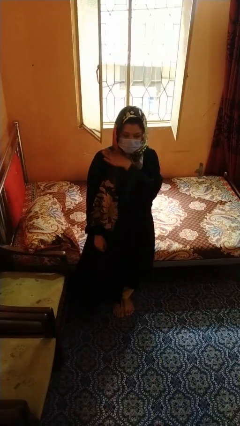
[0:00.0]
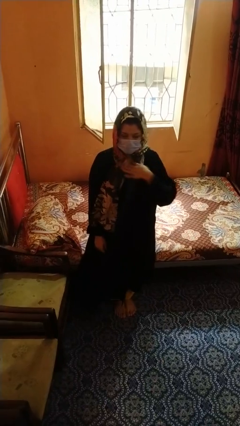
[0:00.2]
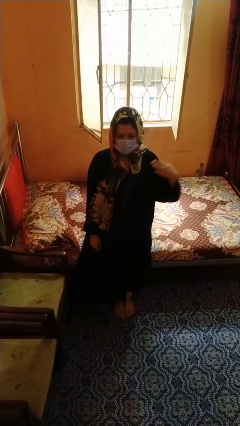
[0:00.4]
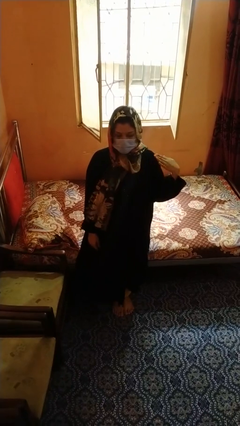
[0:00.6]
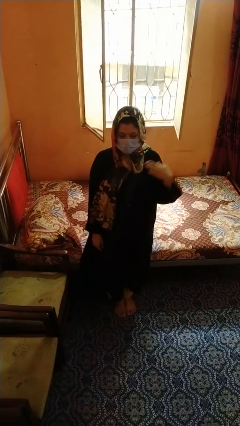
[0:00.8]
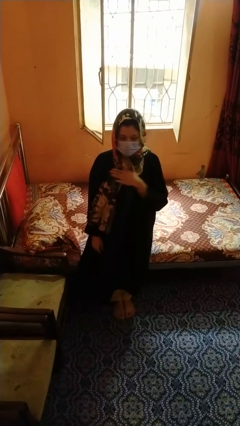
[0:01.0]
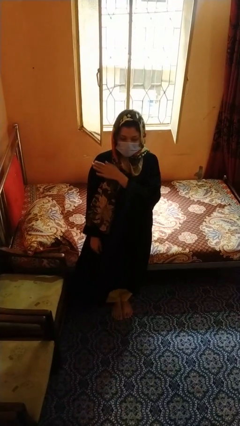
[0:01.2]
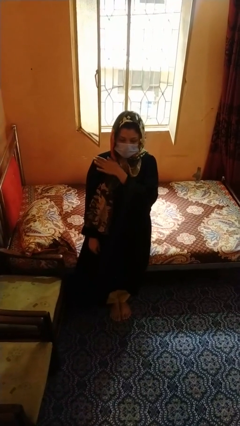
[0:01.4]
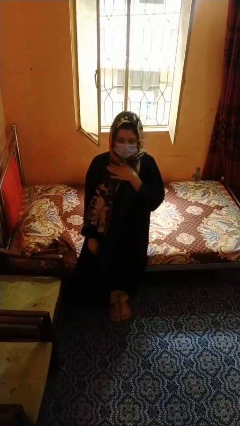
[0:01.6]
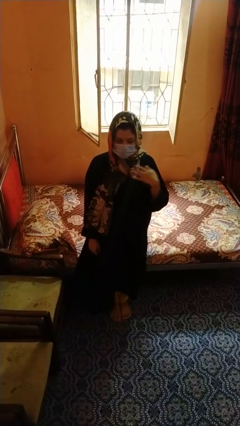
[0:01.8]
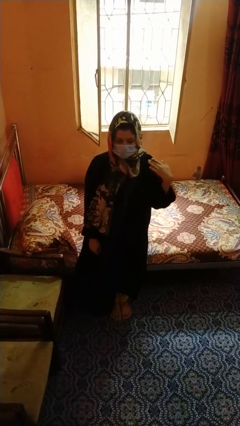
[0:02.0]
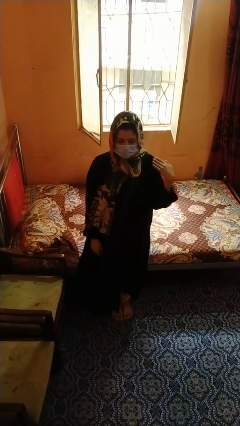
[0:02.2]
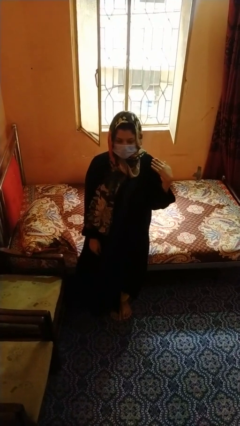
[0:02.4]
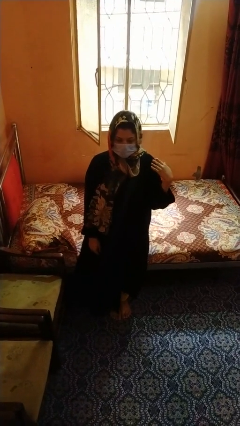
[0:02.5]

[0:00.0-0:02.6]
person gestures cut

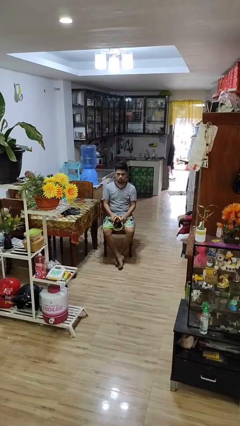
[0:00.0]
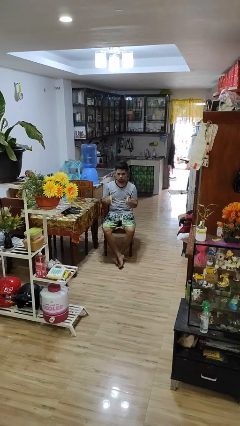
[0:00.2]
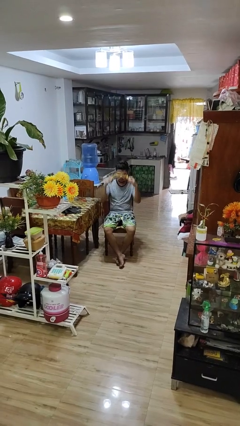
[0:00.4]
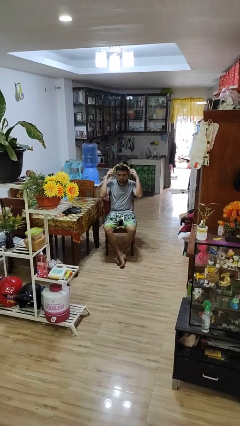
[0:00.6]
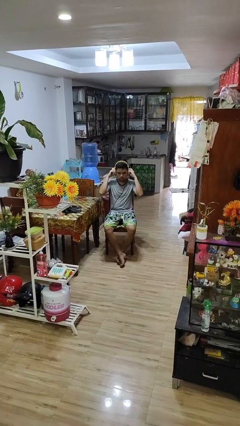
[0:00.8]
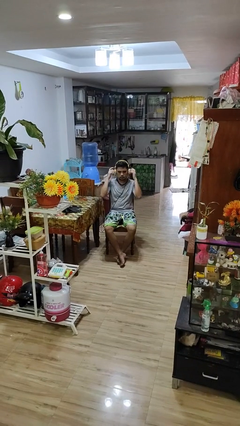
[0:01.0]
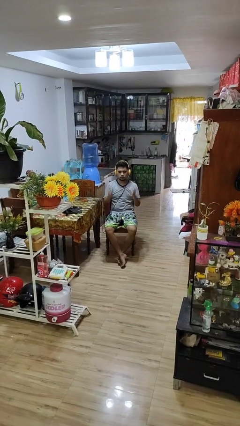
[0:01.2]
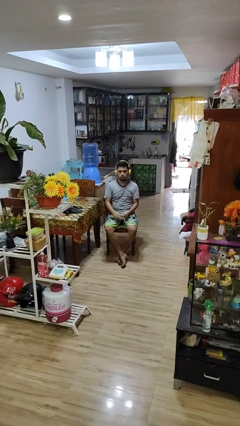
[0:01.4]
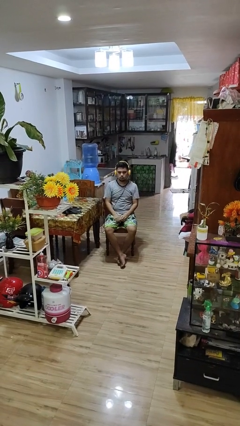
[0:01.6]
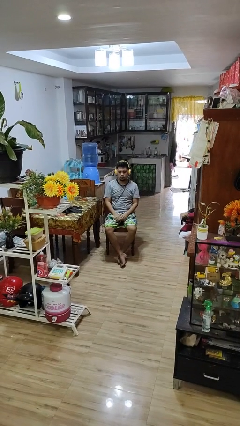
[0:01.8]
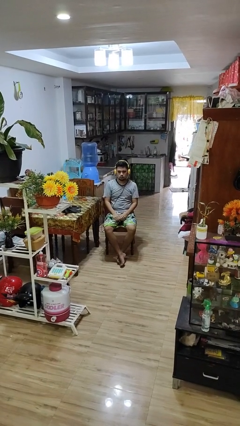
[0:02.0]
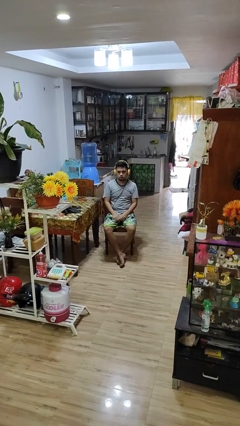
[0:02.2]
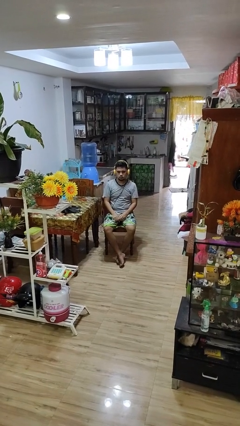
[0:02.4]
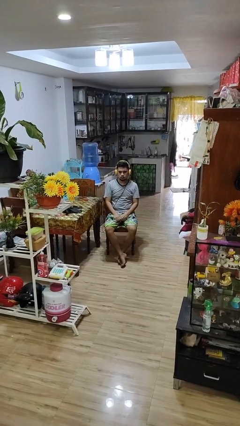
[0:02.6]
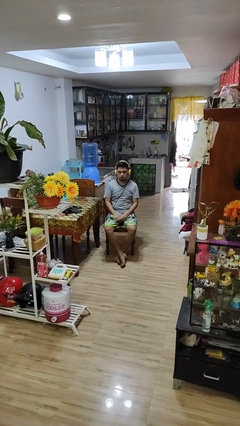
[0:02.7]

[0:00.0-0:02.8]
person puts on headphones

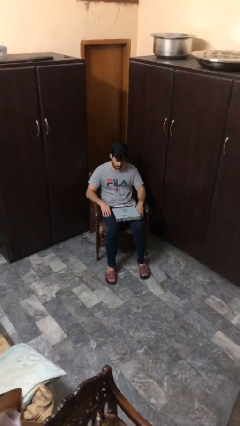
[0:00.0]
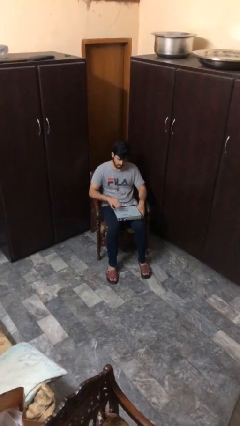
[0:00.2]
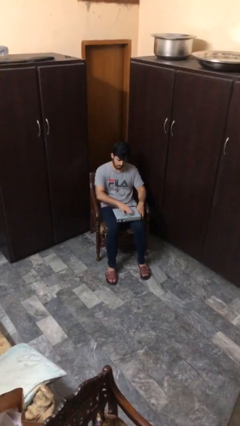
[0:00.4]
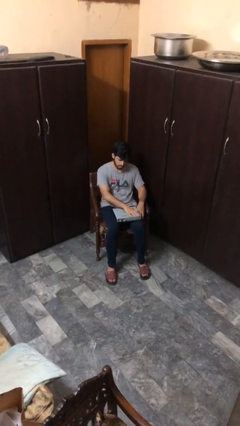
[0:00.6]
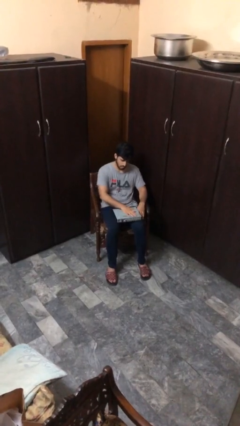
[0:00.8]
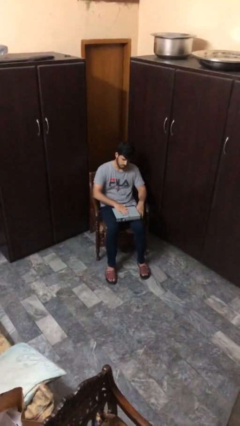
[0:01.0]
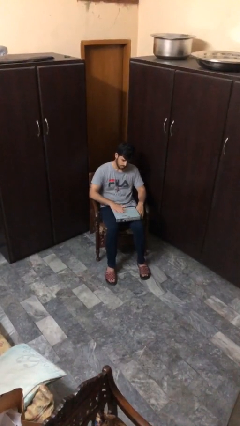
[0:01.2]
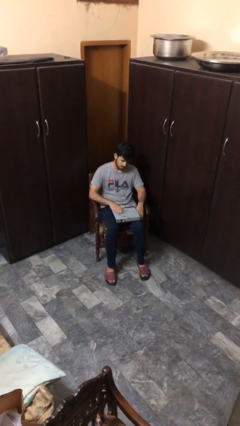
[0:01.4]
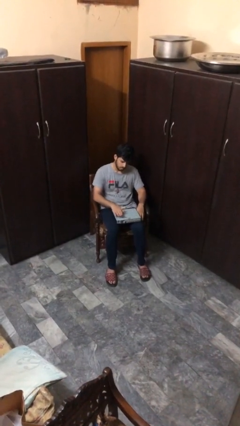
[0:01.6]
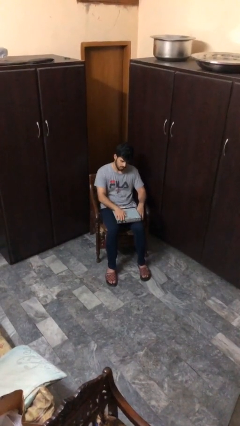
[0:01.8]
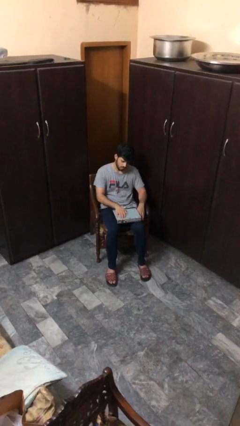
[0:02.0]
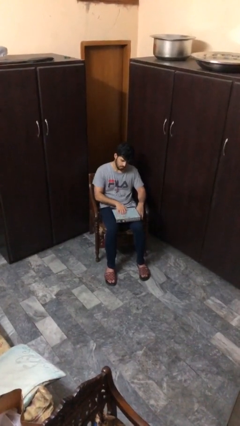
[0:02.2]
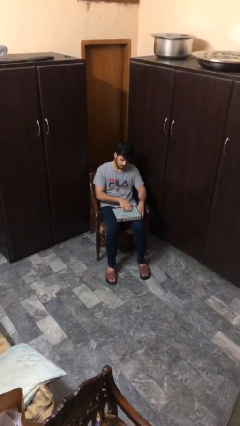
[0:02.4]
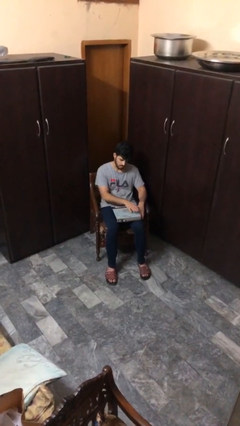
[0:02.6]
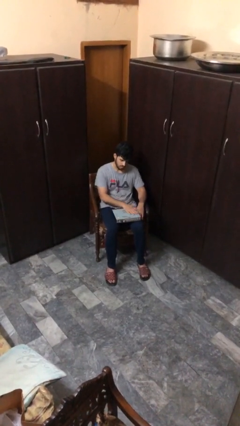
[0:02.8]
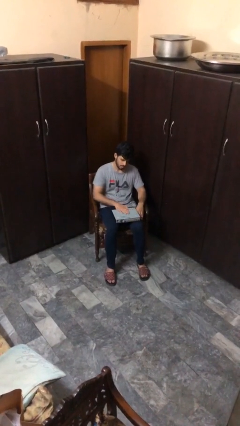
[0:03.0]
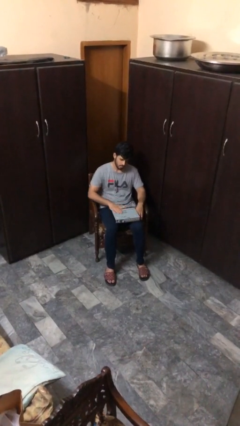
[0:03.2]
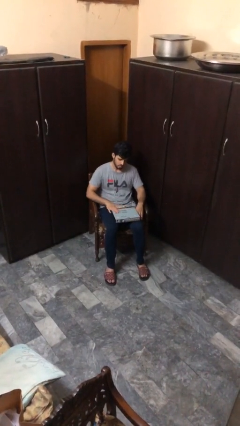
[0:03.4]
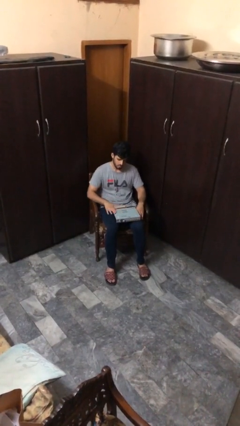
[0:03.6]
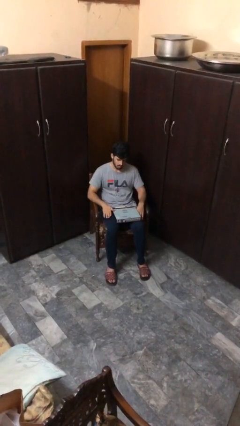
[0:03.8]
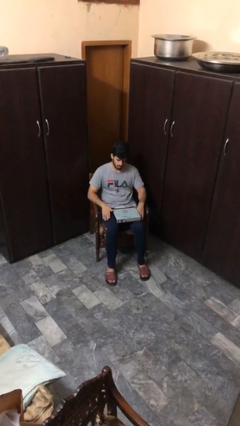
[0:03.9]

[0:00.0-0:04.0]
person waves hand over object

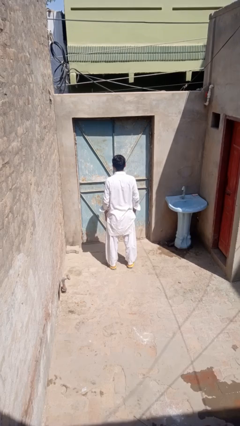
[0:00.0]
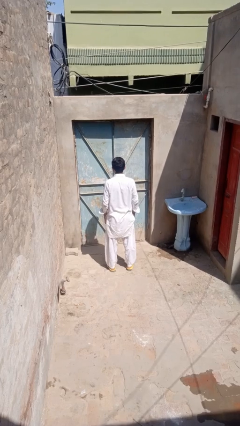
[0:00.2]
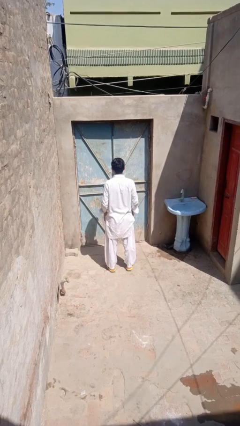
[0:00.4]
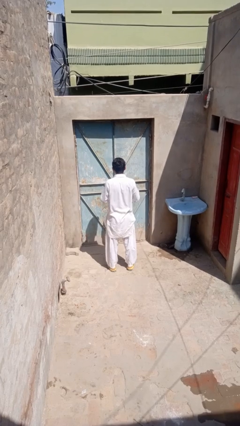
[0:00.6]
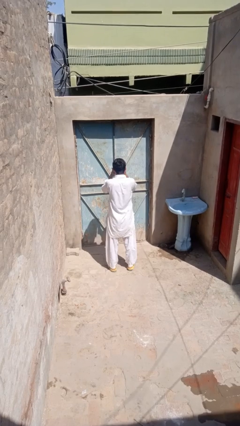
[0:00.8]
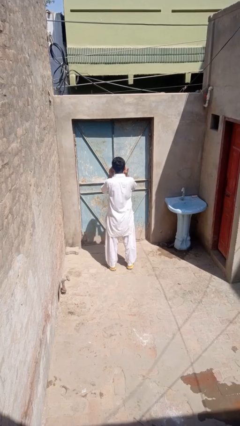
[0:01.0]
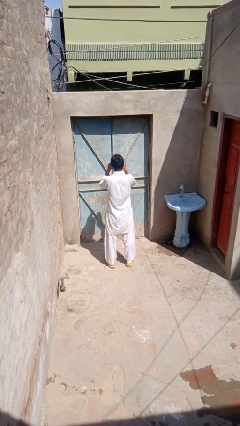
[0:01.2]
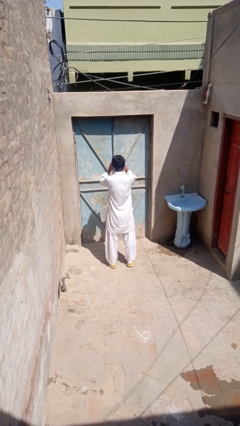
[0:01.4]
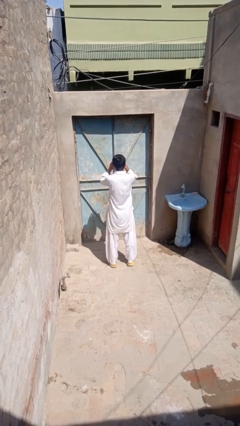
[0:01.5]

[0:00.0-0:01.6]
person rubs eyes

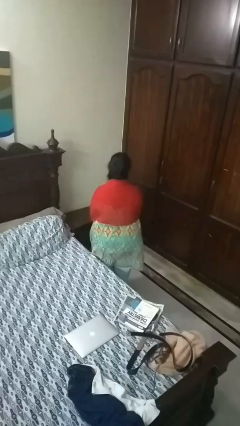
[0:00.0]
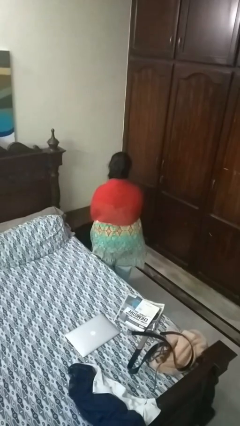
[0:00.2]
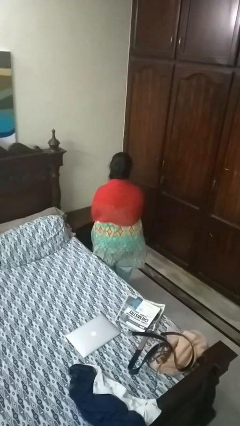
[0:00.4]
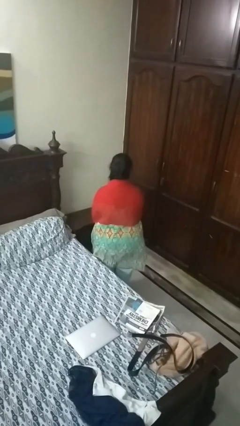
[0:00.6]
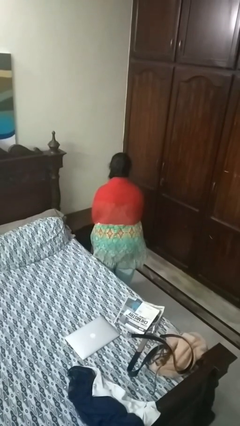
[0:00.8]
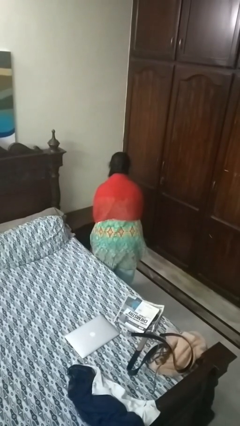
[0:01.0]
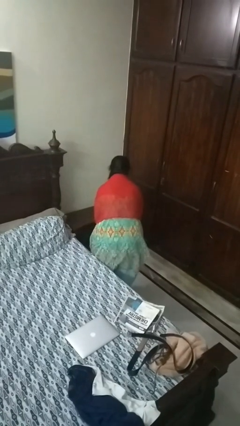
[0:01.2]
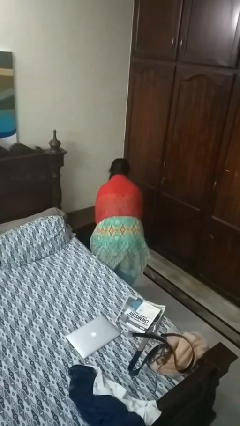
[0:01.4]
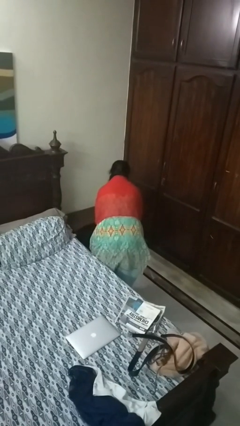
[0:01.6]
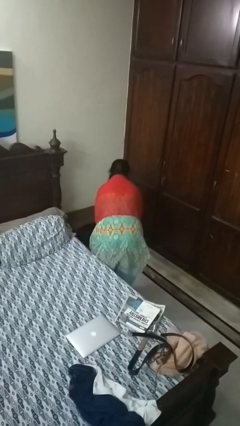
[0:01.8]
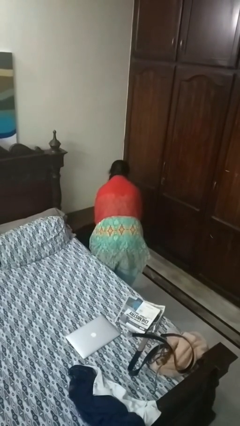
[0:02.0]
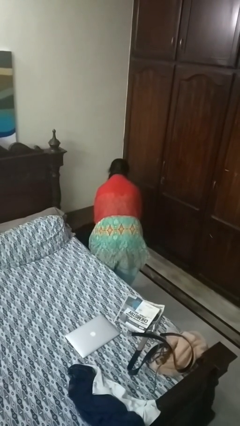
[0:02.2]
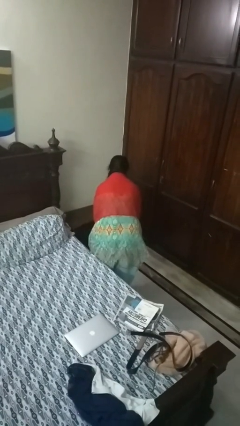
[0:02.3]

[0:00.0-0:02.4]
person bows

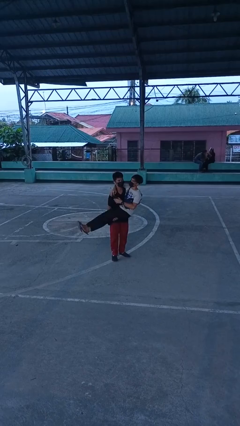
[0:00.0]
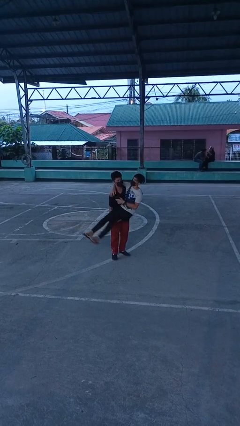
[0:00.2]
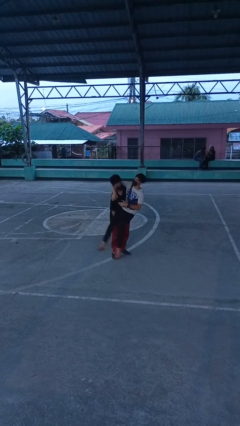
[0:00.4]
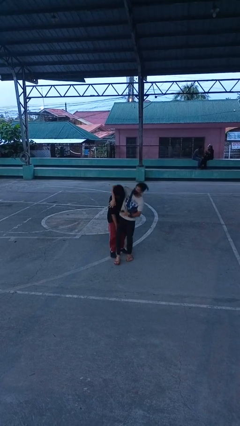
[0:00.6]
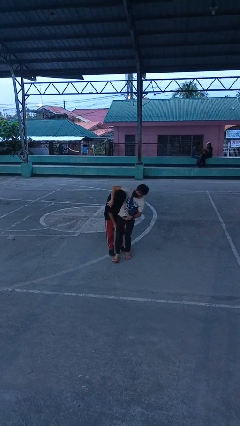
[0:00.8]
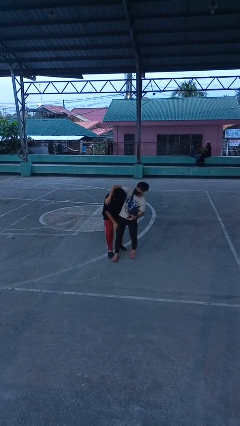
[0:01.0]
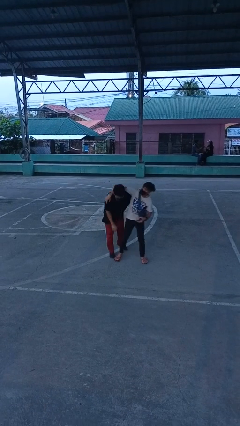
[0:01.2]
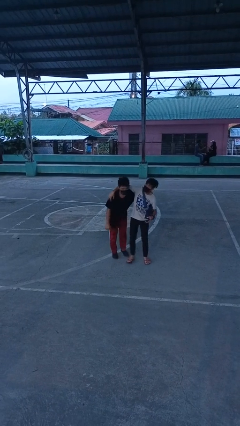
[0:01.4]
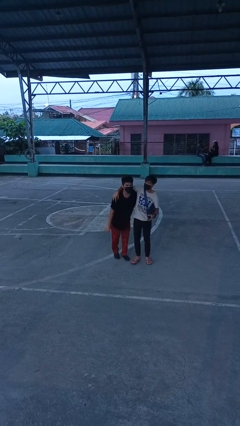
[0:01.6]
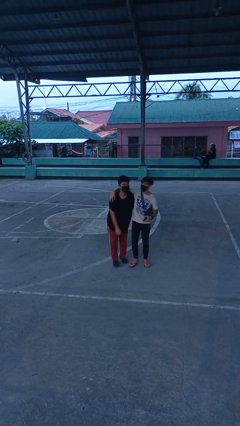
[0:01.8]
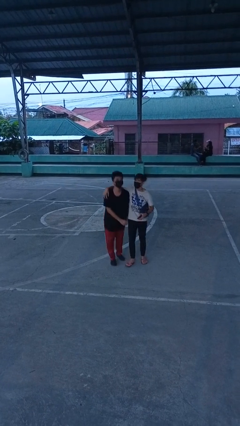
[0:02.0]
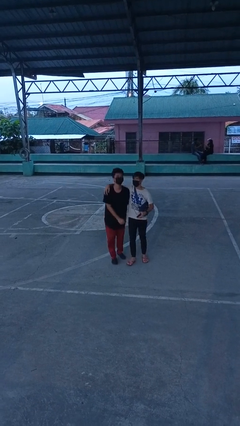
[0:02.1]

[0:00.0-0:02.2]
person puts down person

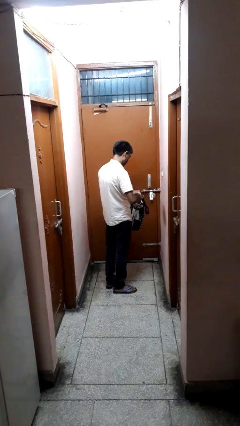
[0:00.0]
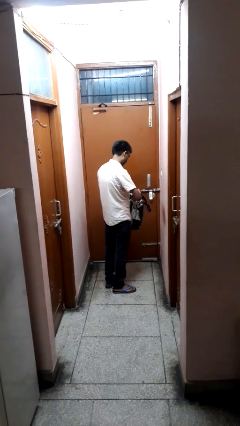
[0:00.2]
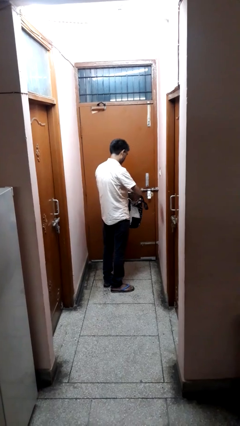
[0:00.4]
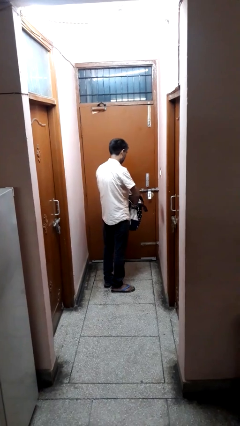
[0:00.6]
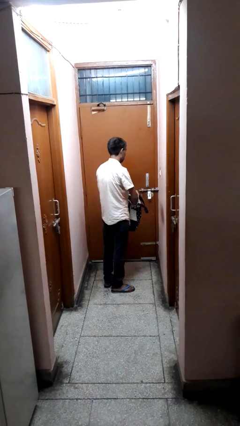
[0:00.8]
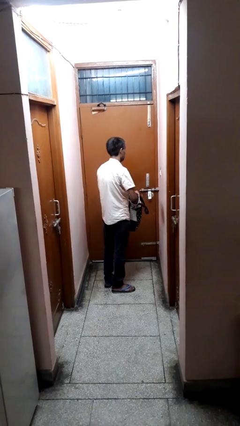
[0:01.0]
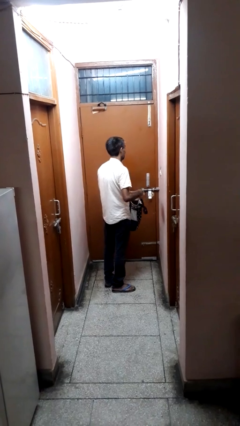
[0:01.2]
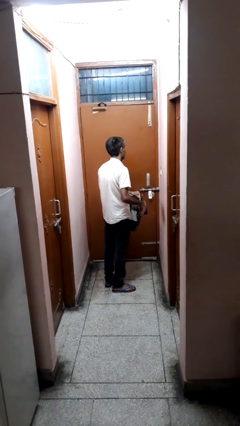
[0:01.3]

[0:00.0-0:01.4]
person puts object into bag

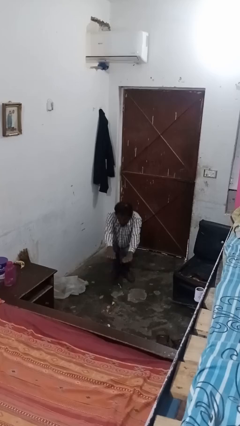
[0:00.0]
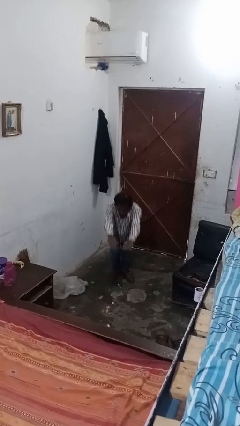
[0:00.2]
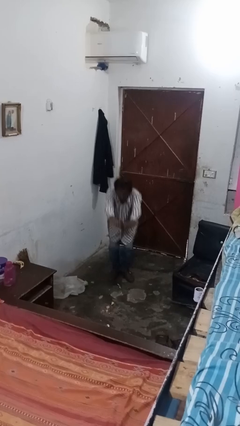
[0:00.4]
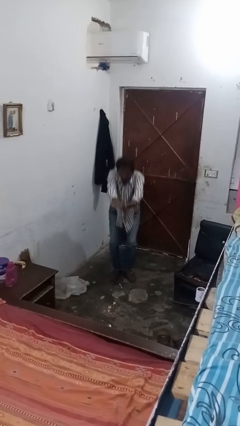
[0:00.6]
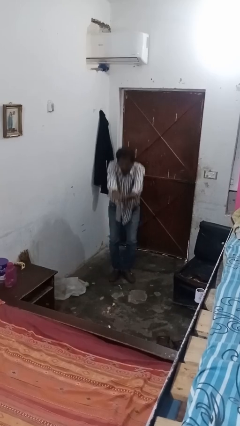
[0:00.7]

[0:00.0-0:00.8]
person squats
